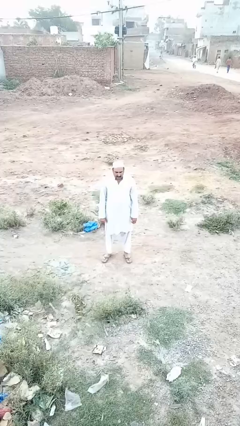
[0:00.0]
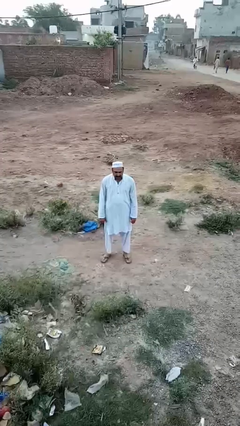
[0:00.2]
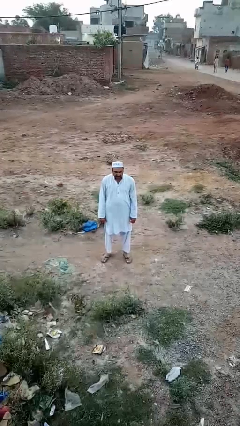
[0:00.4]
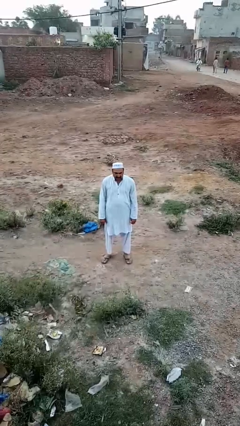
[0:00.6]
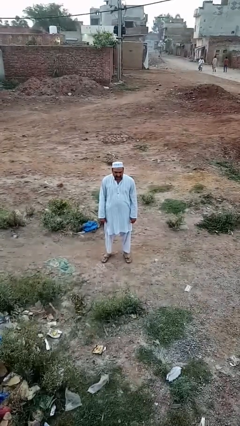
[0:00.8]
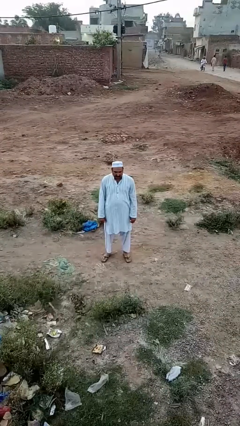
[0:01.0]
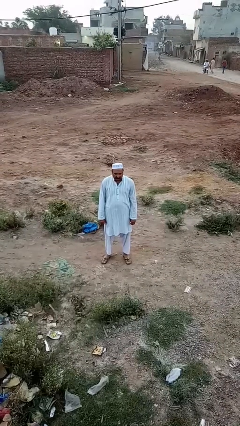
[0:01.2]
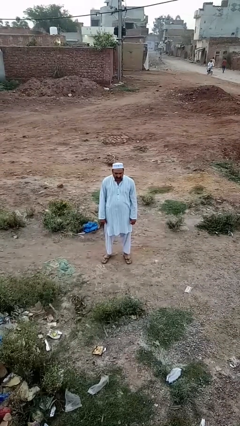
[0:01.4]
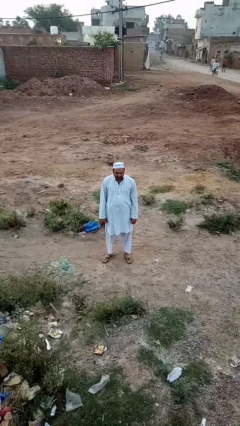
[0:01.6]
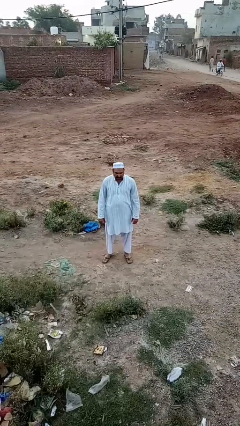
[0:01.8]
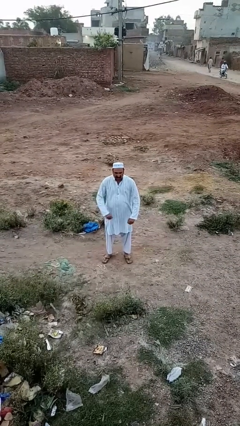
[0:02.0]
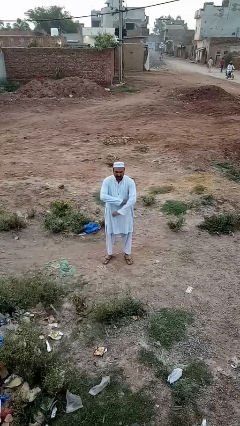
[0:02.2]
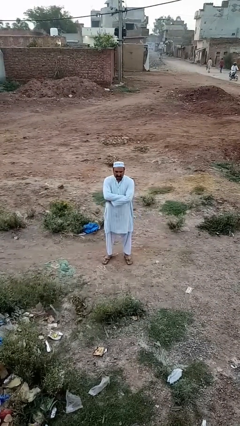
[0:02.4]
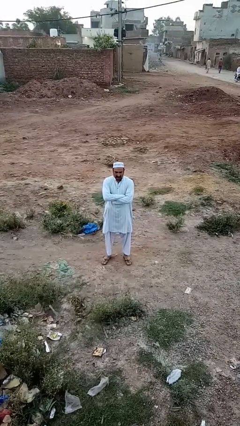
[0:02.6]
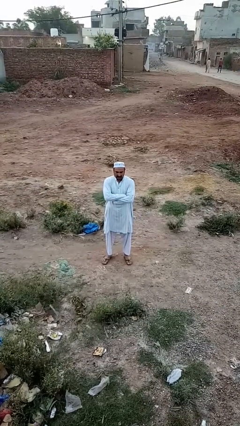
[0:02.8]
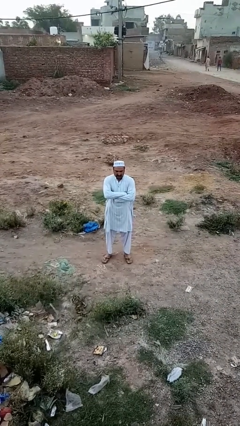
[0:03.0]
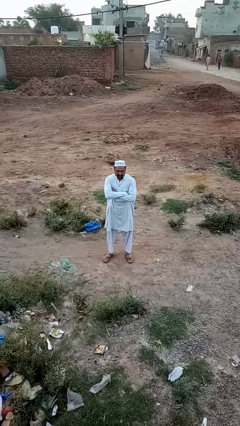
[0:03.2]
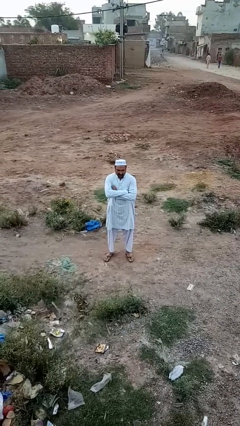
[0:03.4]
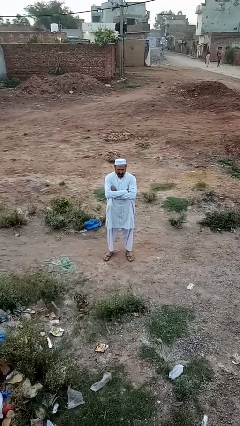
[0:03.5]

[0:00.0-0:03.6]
person crosses arms

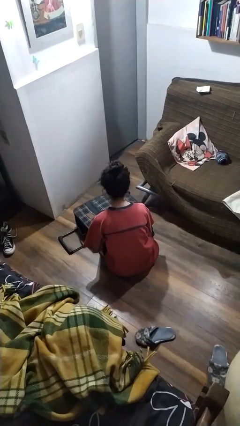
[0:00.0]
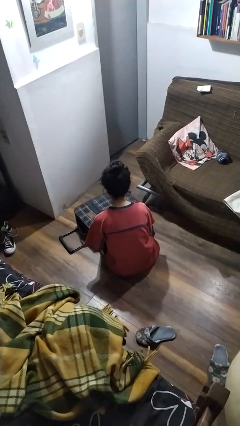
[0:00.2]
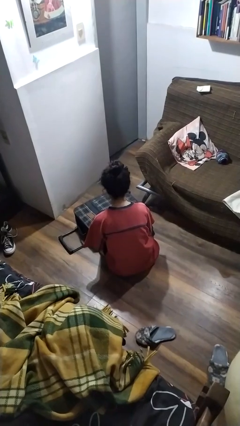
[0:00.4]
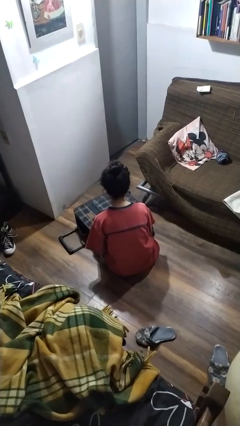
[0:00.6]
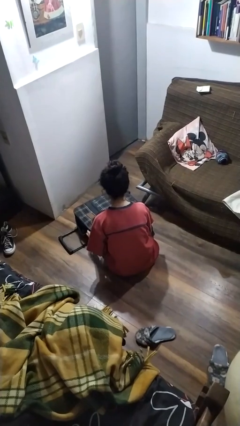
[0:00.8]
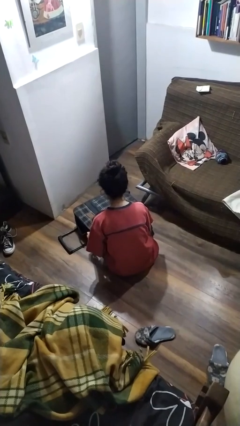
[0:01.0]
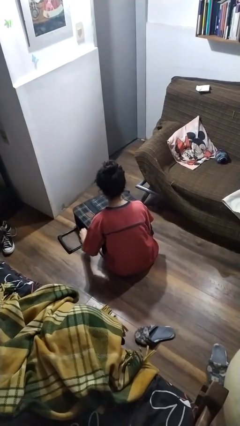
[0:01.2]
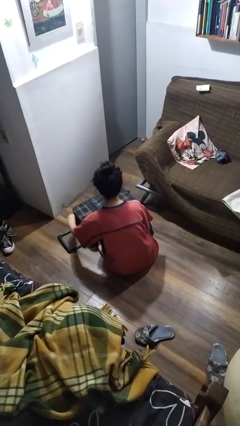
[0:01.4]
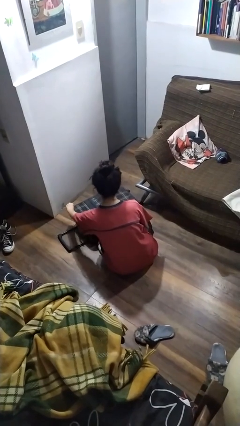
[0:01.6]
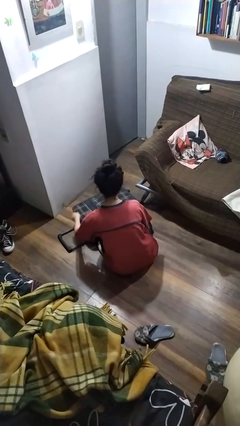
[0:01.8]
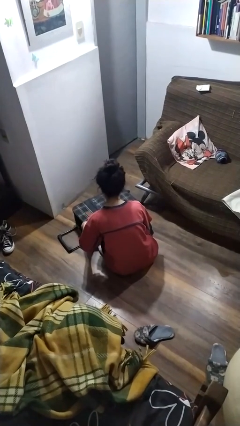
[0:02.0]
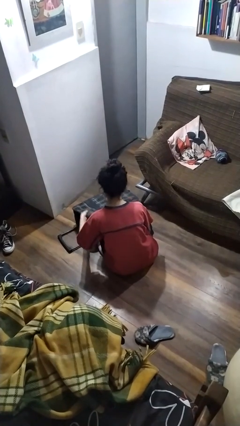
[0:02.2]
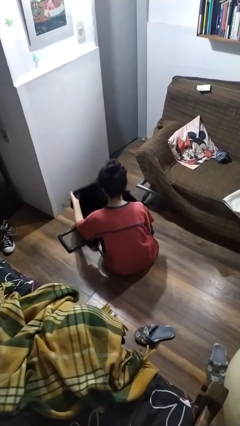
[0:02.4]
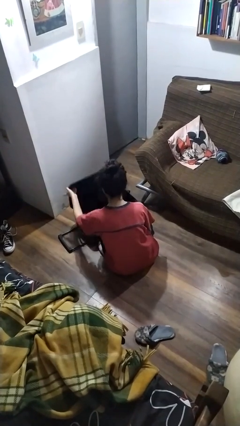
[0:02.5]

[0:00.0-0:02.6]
person opens suitcase

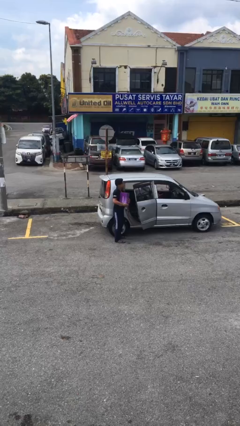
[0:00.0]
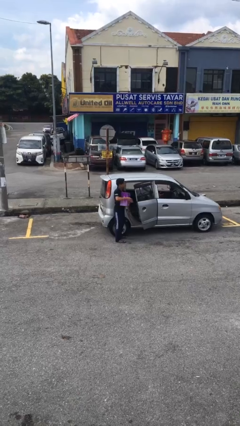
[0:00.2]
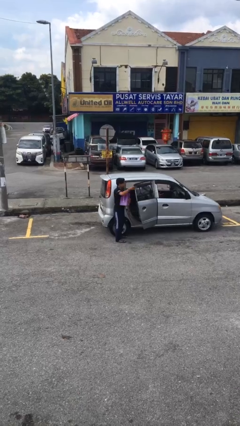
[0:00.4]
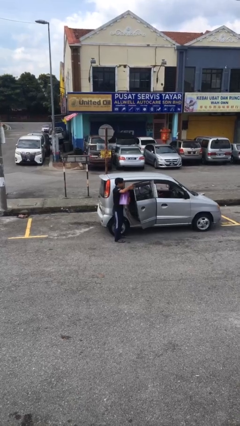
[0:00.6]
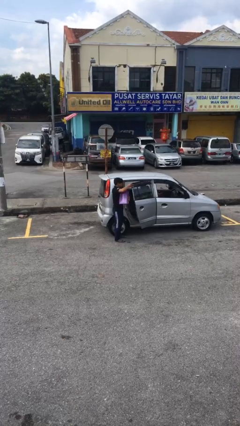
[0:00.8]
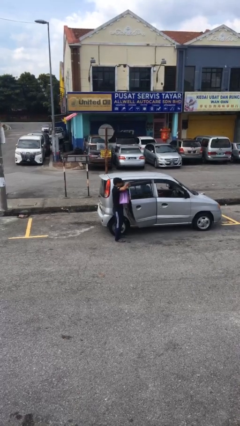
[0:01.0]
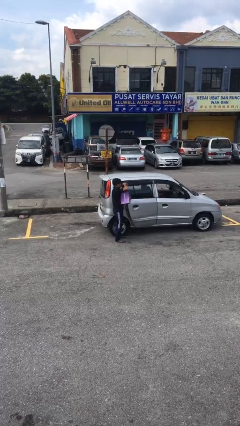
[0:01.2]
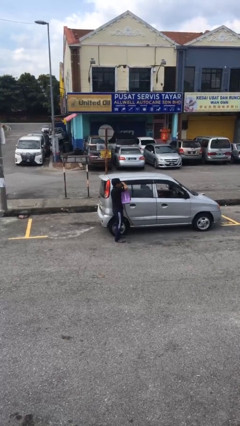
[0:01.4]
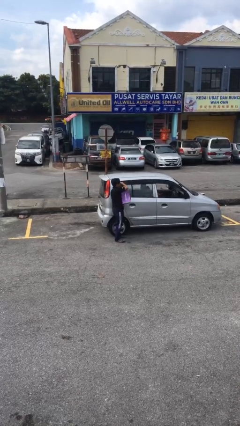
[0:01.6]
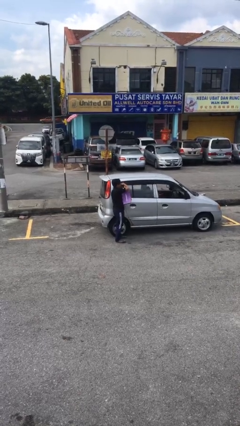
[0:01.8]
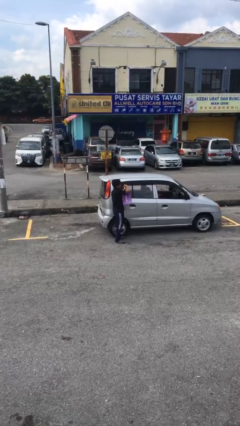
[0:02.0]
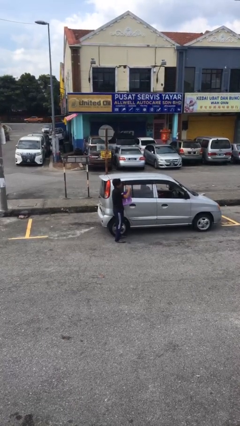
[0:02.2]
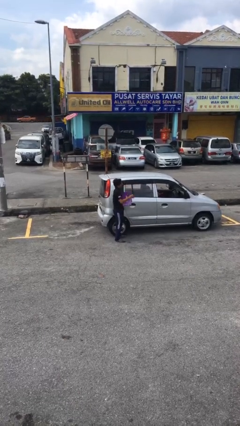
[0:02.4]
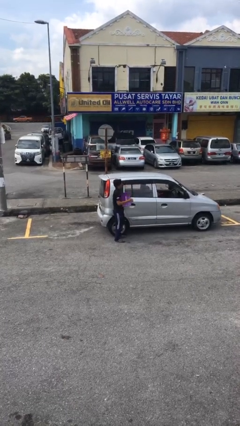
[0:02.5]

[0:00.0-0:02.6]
person closes car door

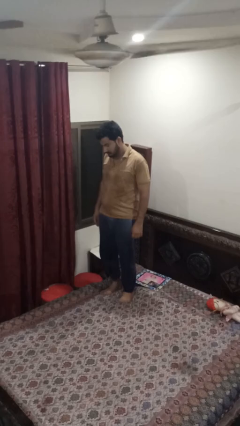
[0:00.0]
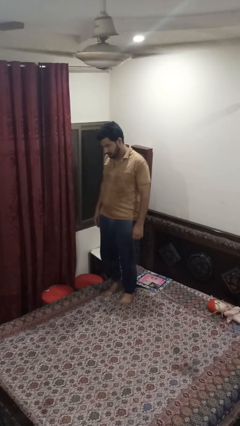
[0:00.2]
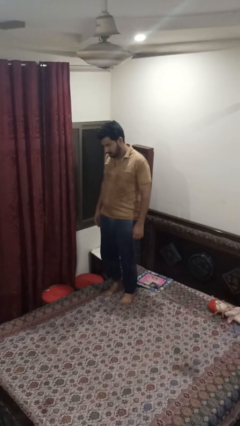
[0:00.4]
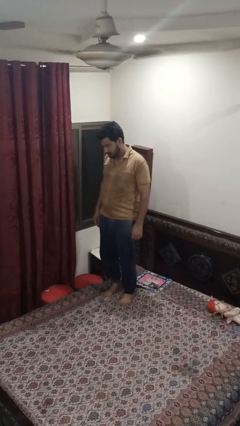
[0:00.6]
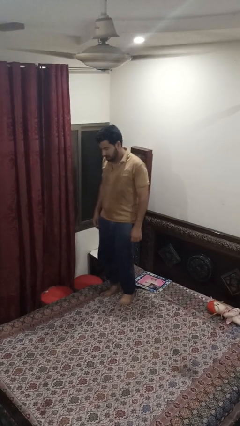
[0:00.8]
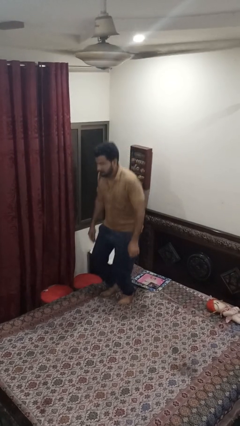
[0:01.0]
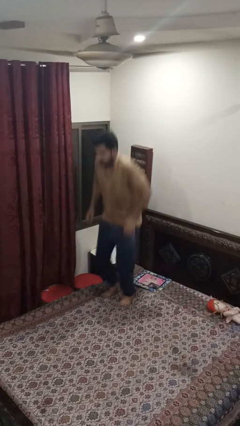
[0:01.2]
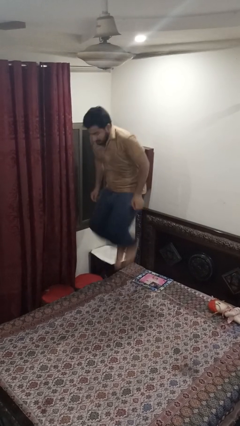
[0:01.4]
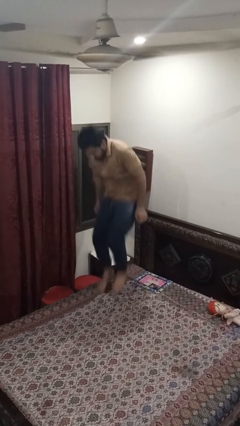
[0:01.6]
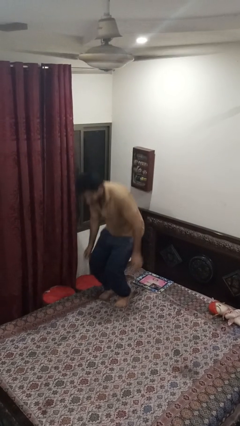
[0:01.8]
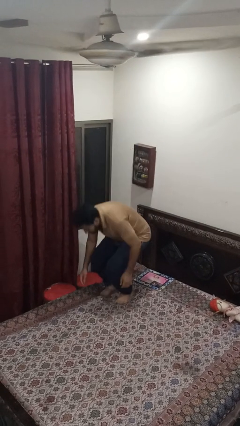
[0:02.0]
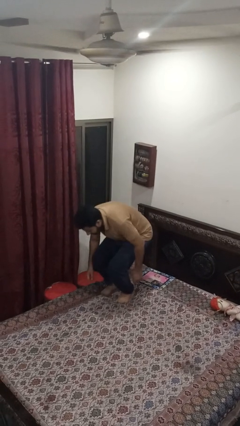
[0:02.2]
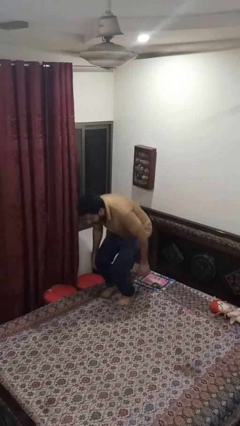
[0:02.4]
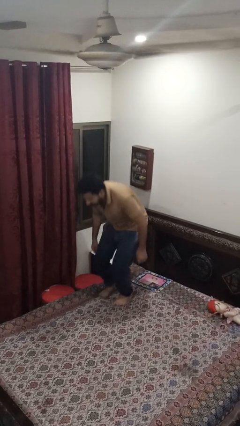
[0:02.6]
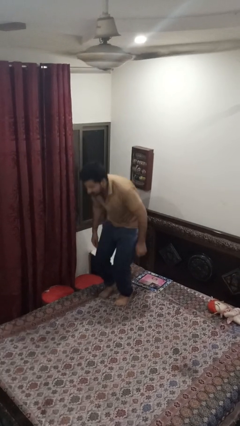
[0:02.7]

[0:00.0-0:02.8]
person jumps on bed

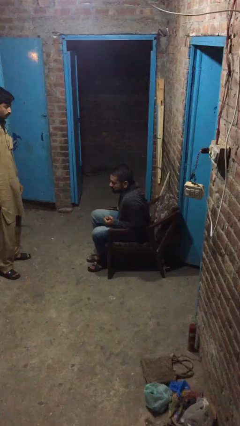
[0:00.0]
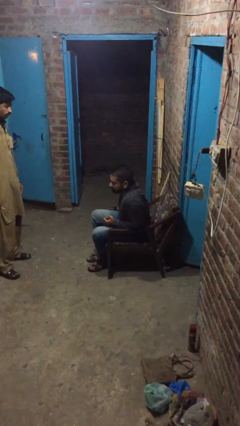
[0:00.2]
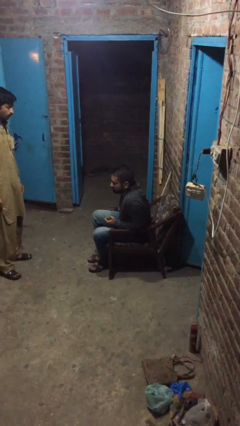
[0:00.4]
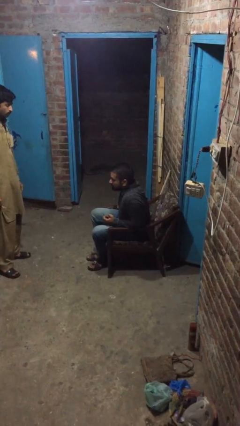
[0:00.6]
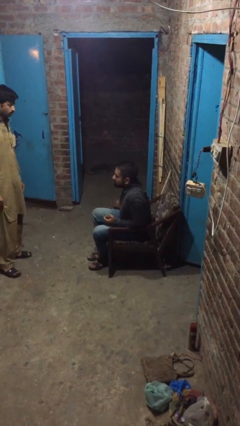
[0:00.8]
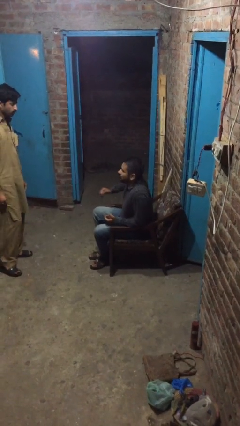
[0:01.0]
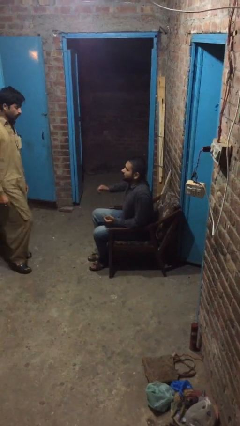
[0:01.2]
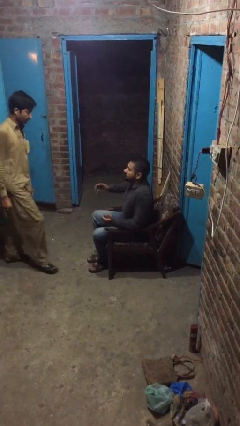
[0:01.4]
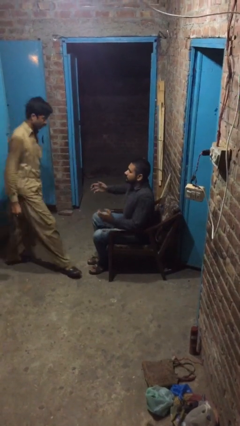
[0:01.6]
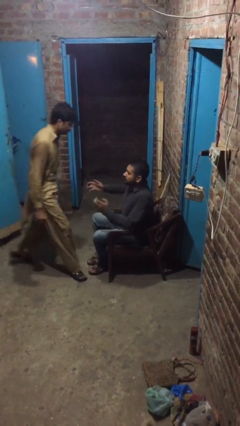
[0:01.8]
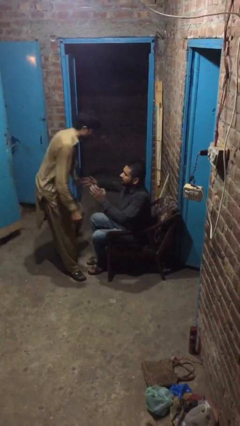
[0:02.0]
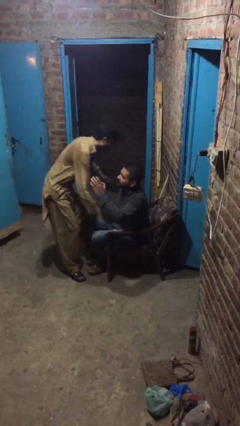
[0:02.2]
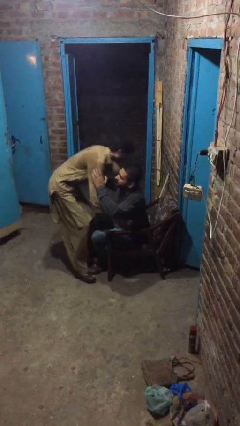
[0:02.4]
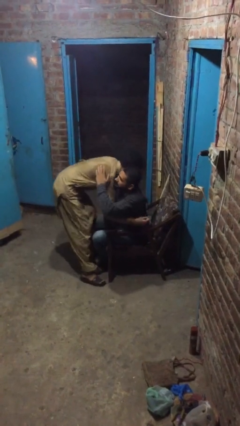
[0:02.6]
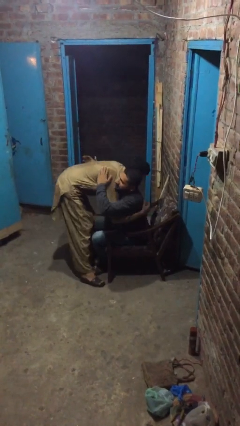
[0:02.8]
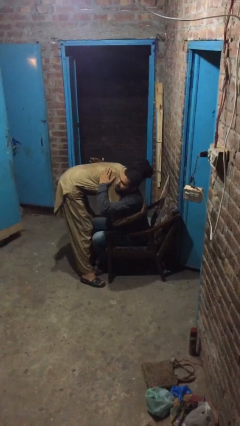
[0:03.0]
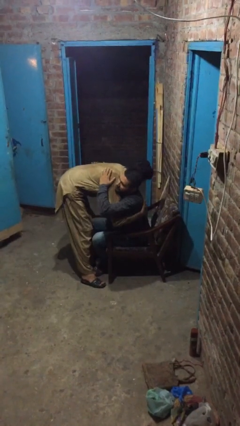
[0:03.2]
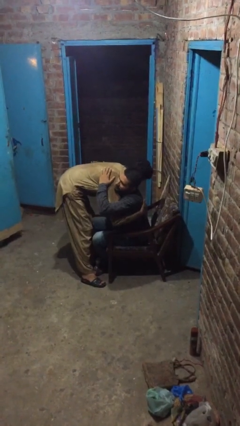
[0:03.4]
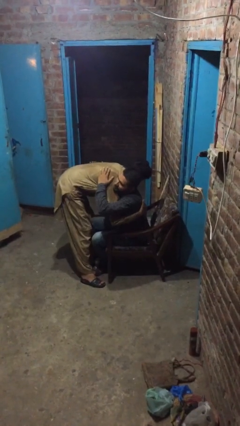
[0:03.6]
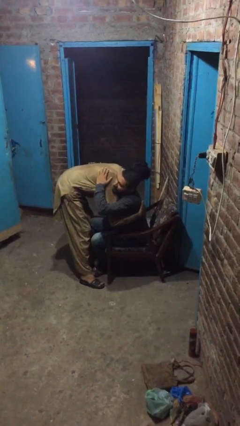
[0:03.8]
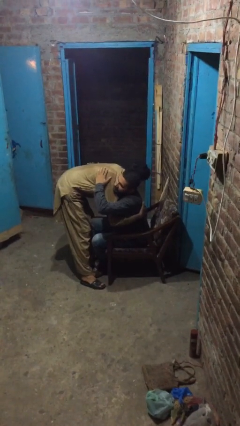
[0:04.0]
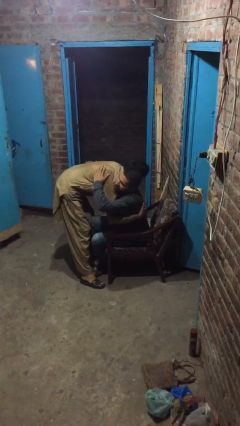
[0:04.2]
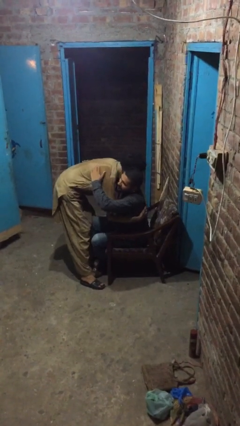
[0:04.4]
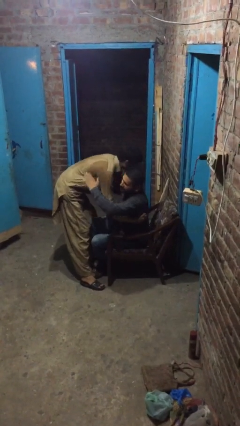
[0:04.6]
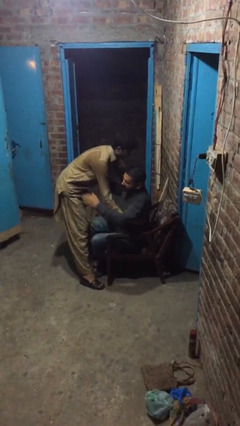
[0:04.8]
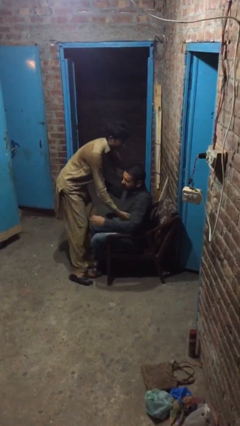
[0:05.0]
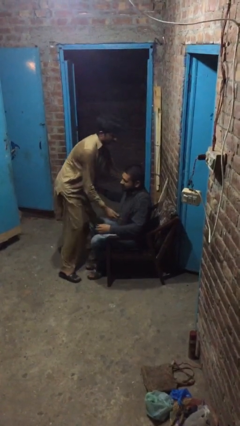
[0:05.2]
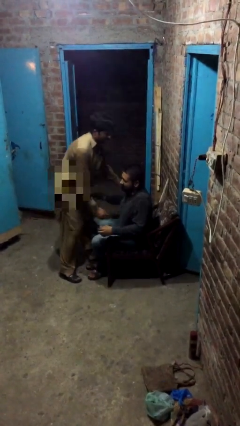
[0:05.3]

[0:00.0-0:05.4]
person embraces person

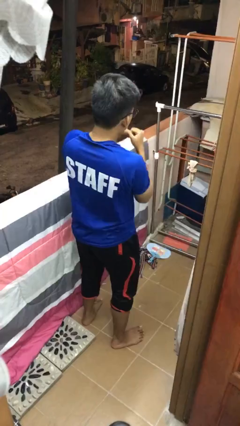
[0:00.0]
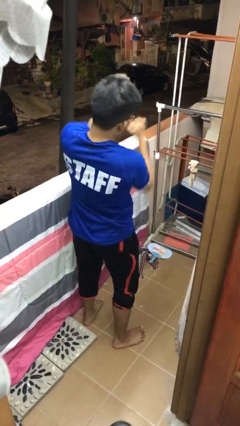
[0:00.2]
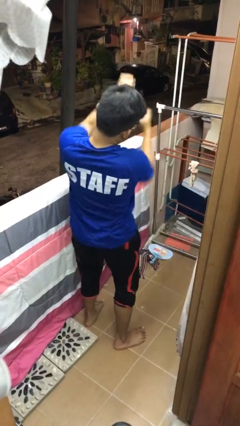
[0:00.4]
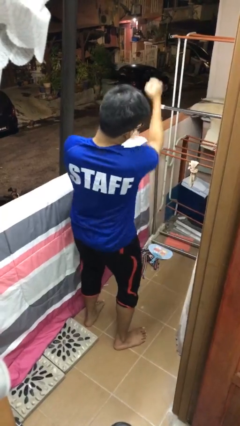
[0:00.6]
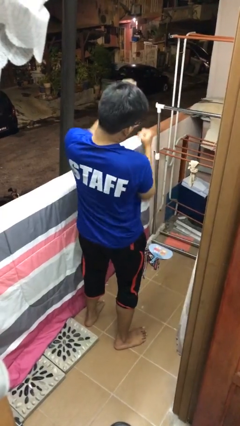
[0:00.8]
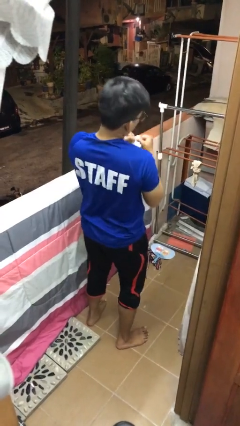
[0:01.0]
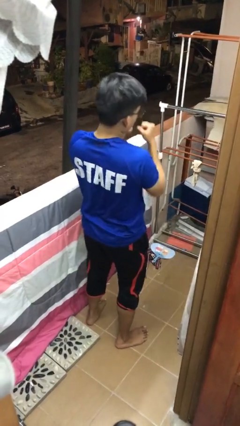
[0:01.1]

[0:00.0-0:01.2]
person punches
